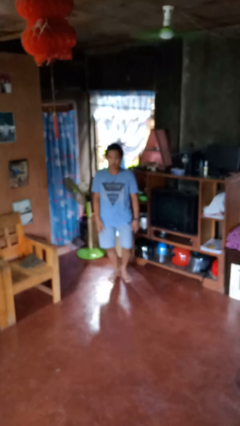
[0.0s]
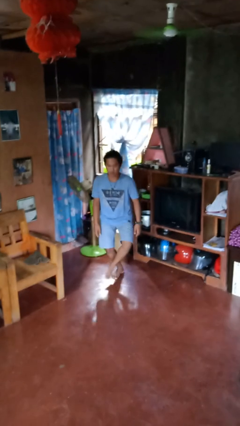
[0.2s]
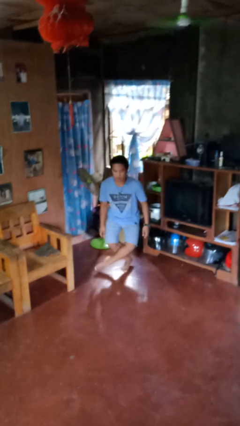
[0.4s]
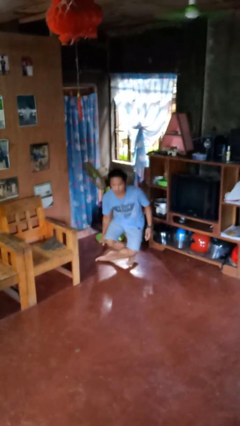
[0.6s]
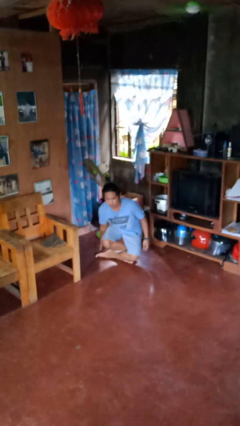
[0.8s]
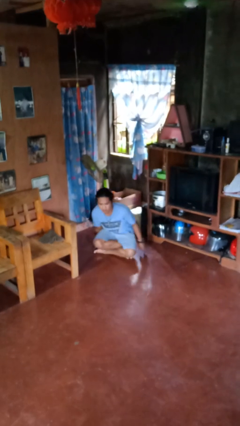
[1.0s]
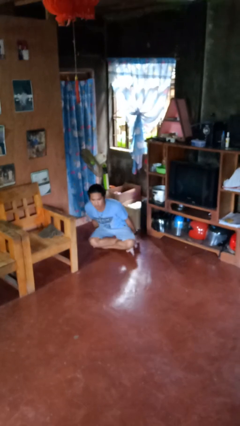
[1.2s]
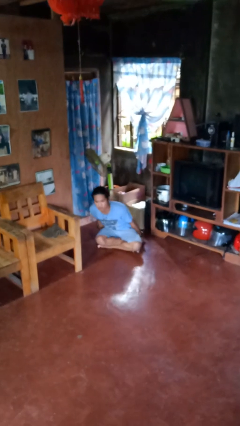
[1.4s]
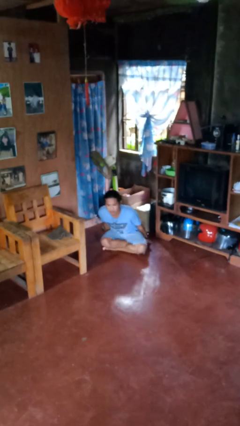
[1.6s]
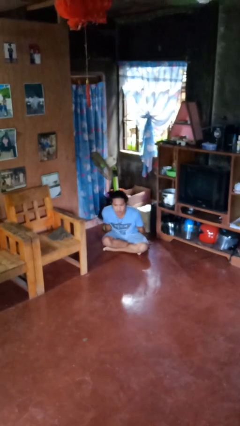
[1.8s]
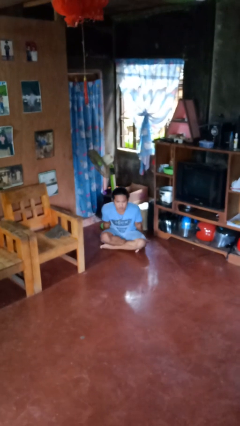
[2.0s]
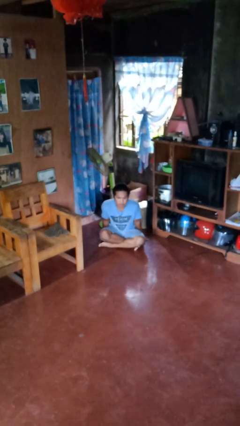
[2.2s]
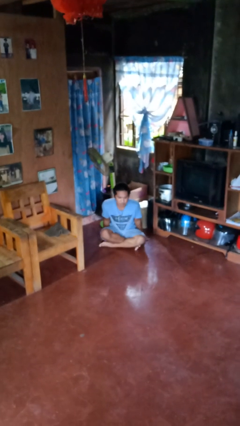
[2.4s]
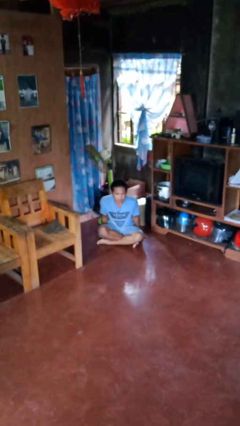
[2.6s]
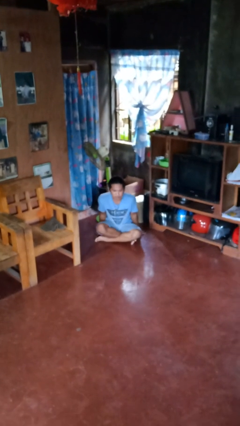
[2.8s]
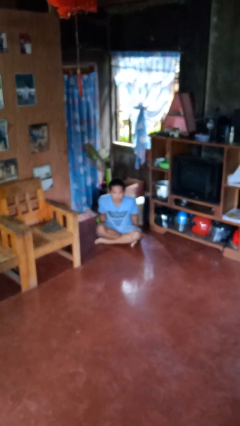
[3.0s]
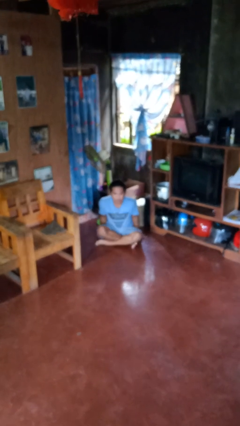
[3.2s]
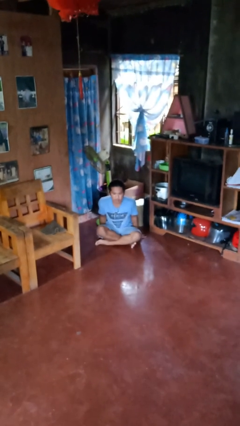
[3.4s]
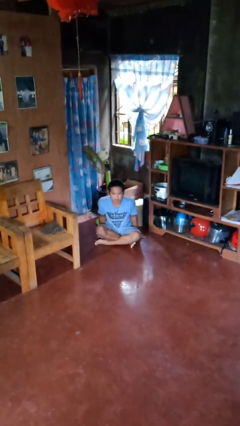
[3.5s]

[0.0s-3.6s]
person sits crisscross

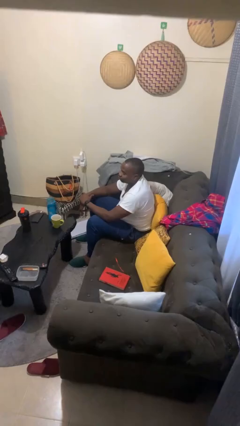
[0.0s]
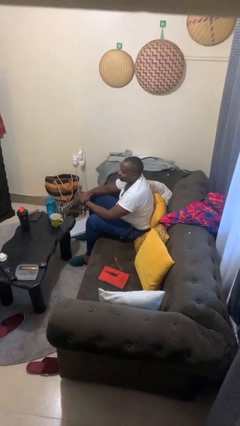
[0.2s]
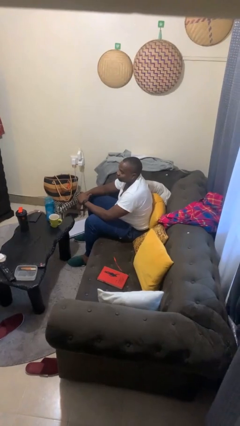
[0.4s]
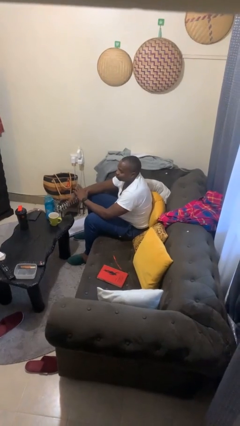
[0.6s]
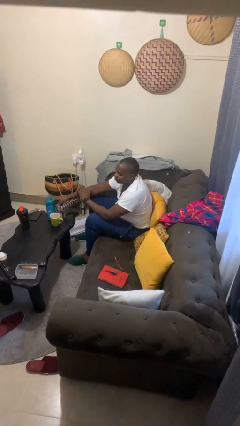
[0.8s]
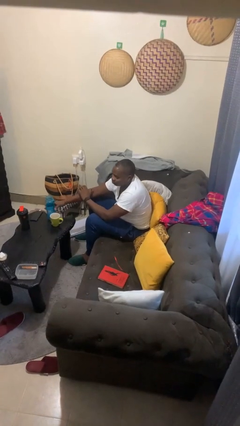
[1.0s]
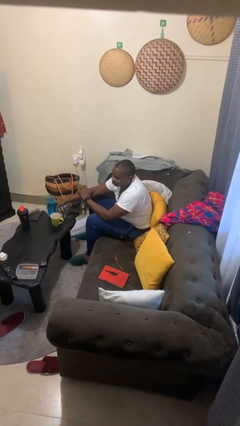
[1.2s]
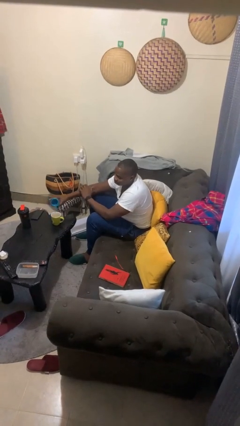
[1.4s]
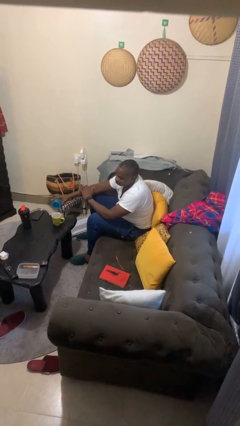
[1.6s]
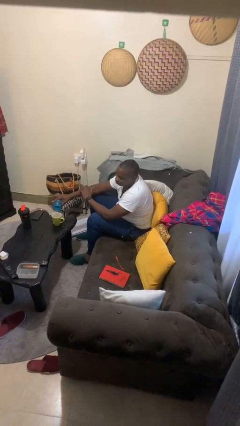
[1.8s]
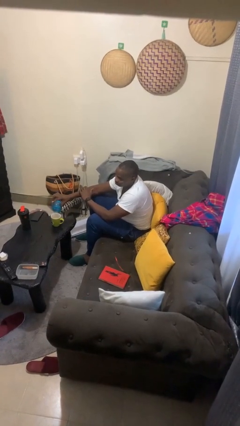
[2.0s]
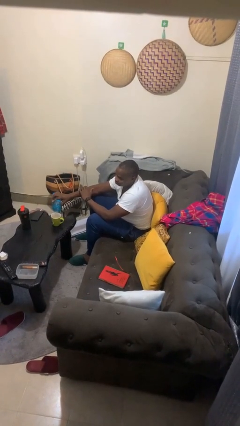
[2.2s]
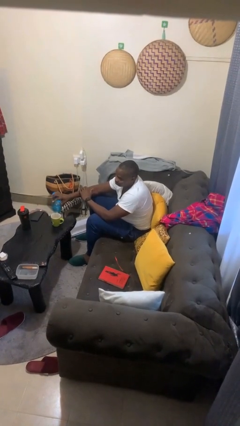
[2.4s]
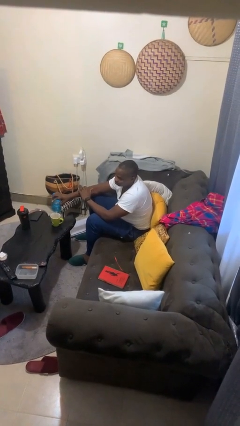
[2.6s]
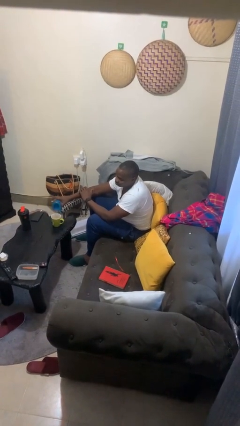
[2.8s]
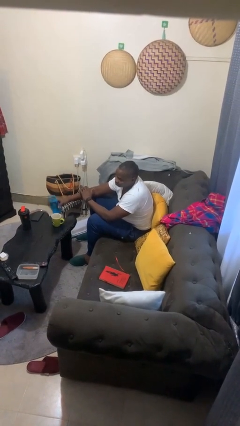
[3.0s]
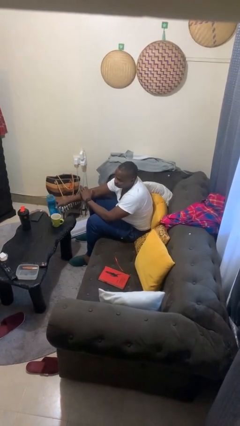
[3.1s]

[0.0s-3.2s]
person pours liquid into cup

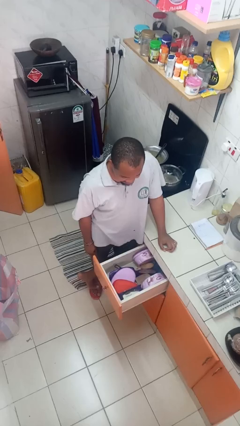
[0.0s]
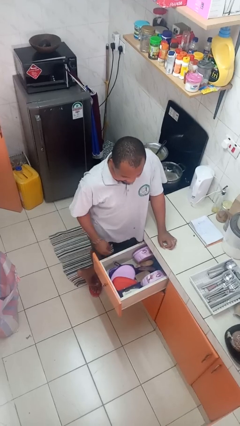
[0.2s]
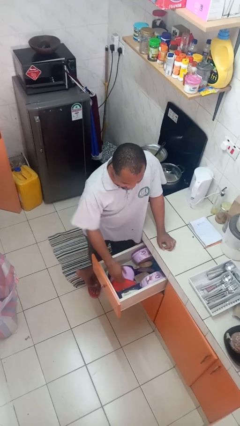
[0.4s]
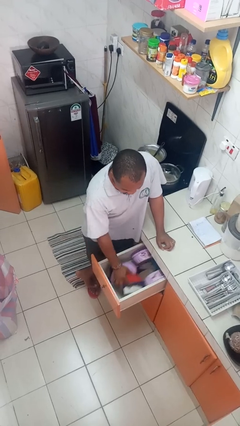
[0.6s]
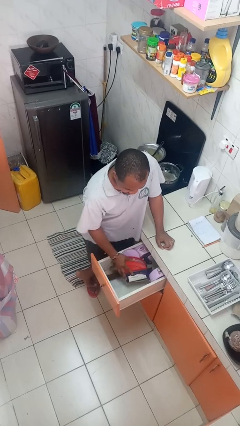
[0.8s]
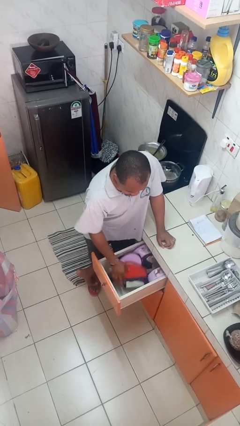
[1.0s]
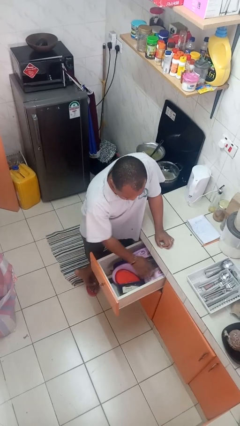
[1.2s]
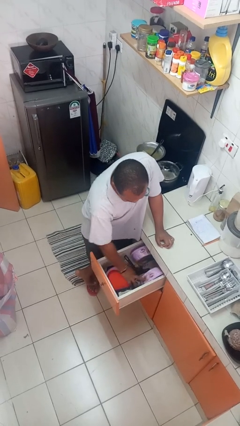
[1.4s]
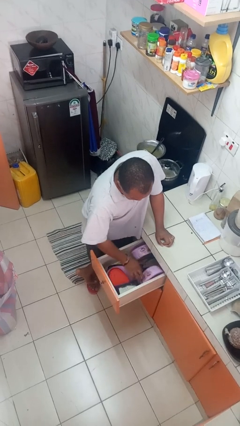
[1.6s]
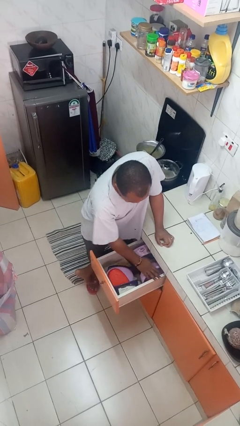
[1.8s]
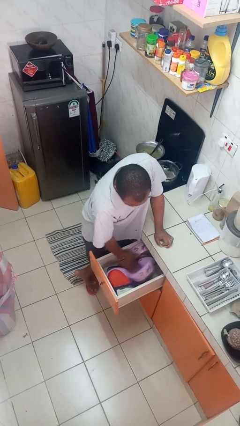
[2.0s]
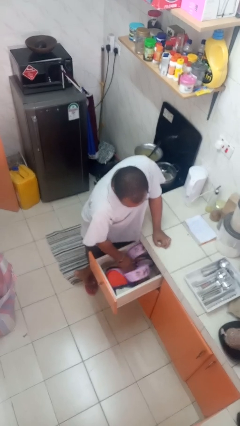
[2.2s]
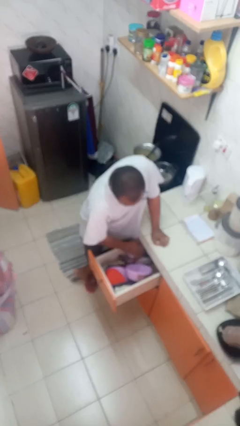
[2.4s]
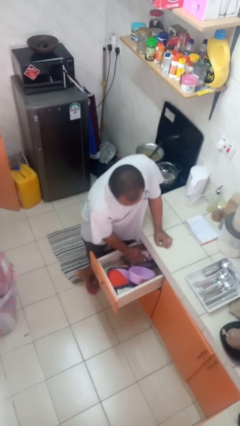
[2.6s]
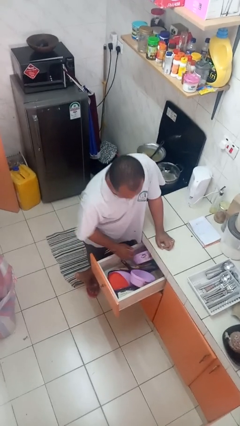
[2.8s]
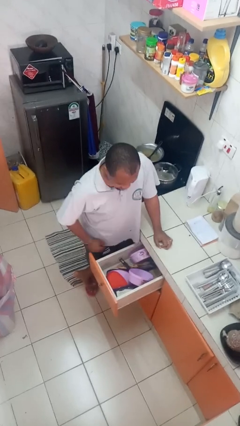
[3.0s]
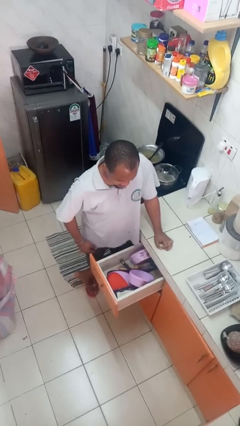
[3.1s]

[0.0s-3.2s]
person searches in kitchen drawer

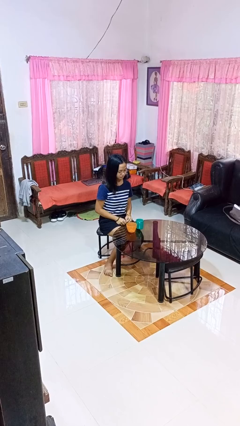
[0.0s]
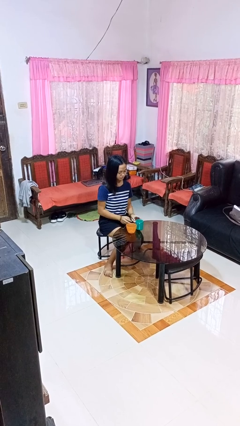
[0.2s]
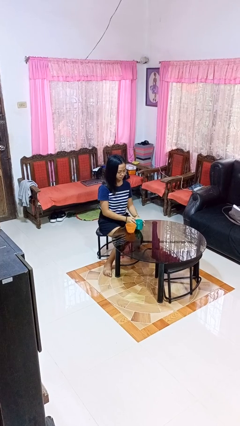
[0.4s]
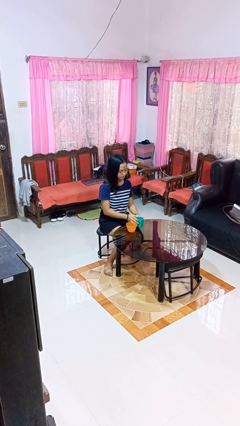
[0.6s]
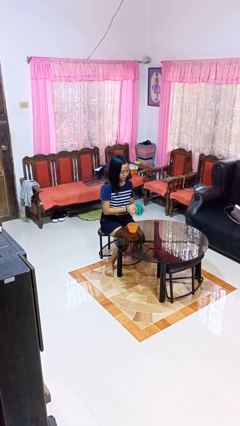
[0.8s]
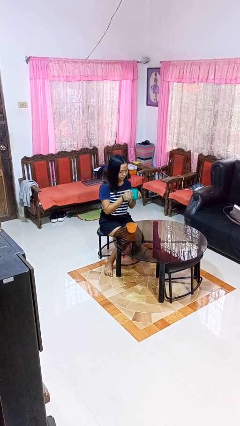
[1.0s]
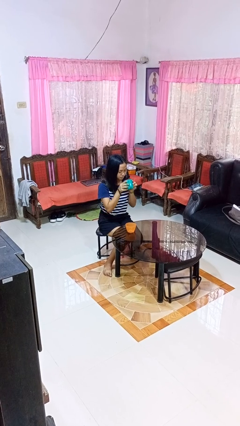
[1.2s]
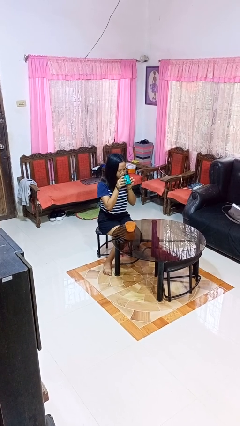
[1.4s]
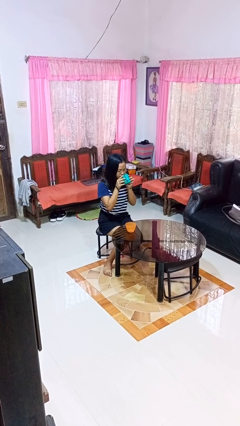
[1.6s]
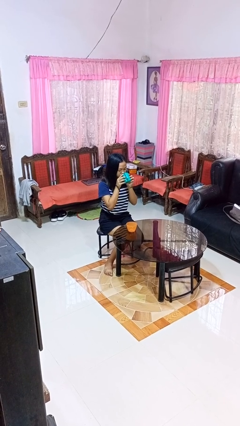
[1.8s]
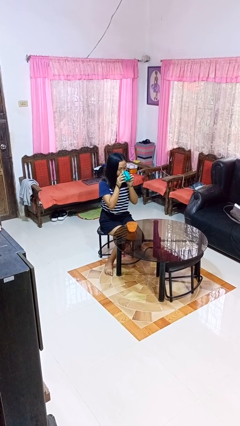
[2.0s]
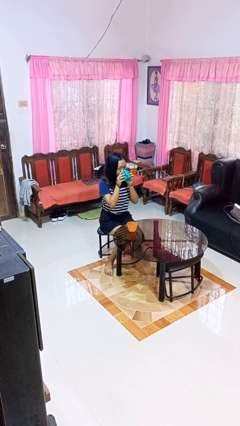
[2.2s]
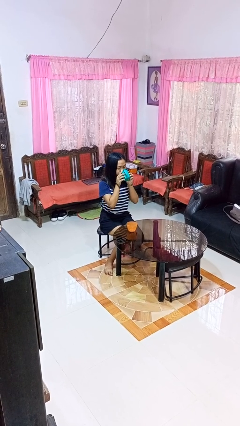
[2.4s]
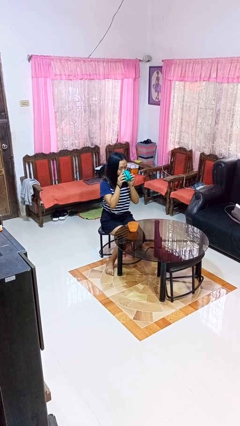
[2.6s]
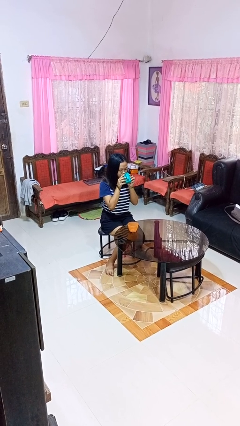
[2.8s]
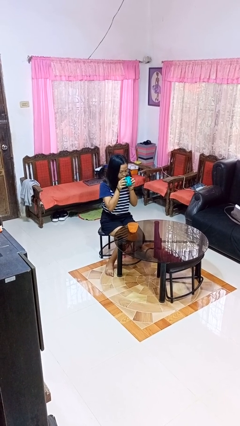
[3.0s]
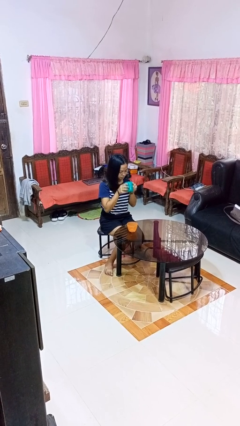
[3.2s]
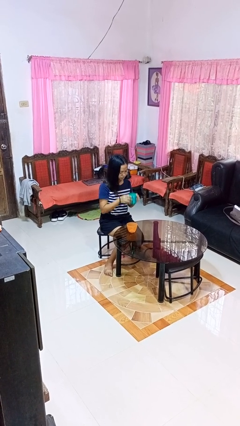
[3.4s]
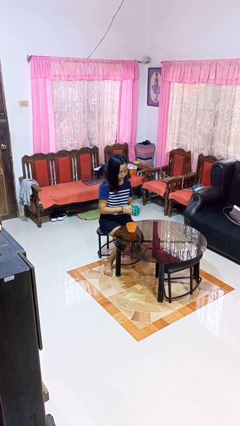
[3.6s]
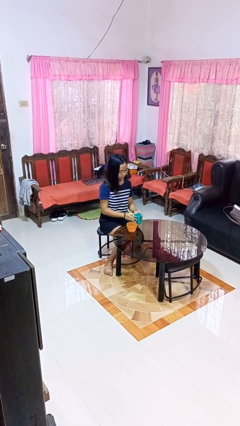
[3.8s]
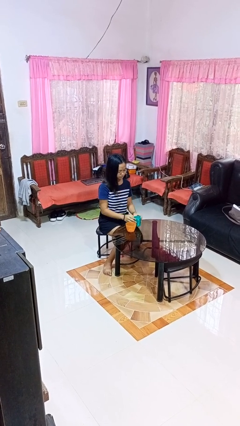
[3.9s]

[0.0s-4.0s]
person drinks from cup

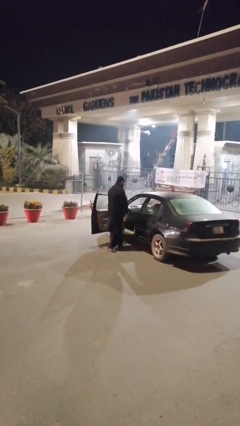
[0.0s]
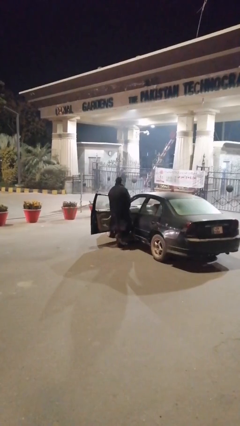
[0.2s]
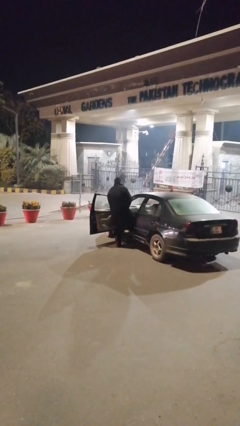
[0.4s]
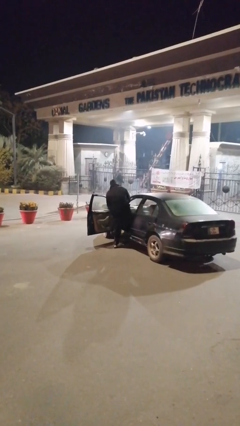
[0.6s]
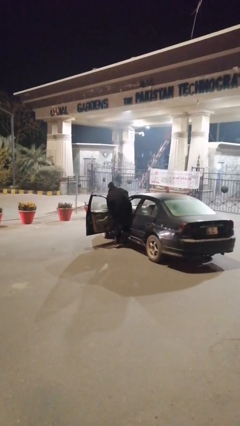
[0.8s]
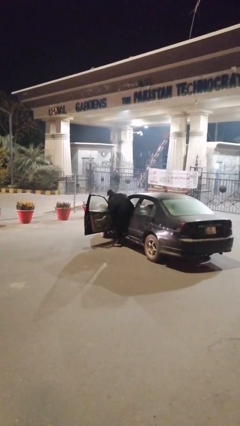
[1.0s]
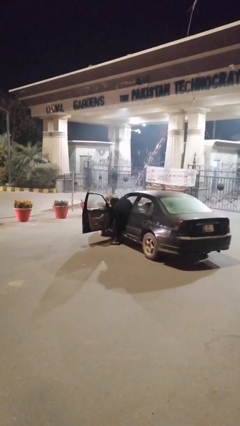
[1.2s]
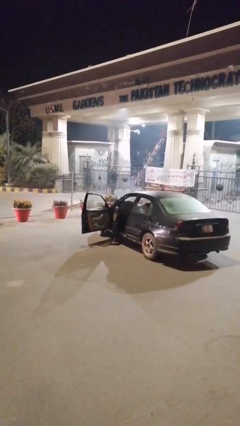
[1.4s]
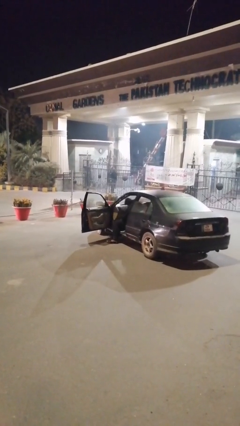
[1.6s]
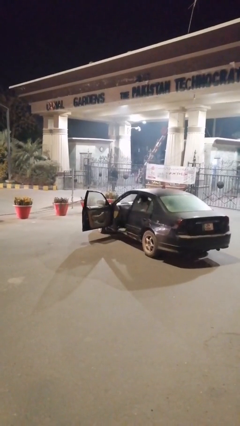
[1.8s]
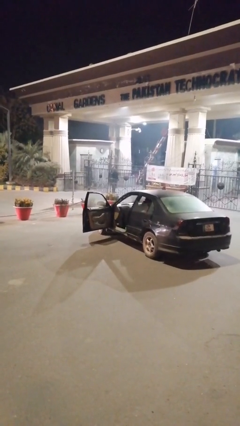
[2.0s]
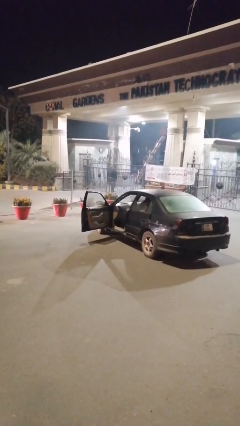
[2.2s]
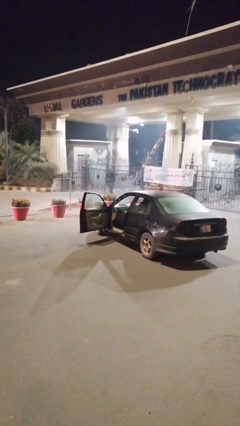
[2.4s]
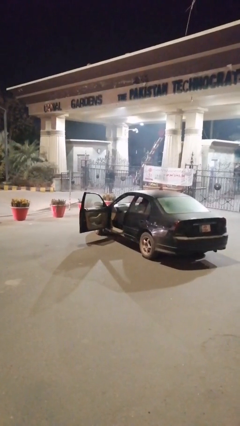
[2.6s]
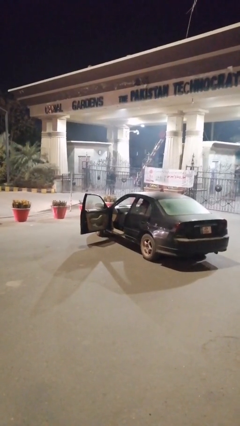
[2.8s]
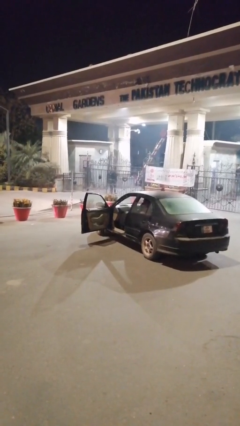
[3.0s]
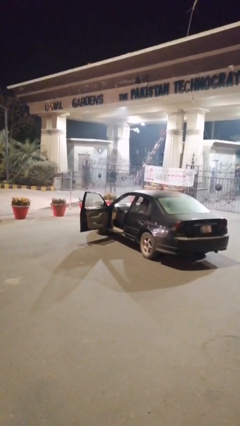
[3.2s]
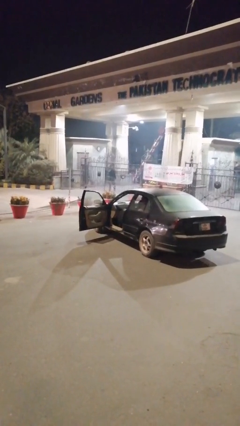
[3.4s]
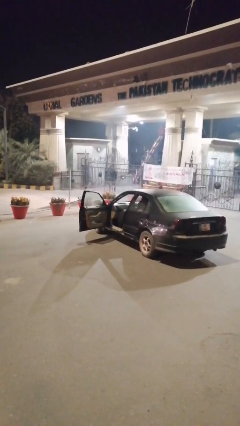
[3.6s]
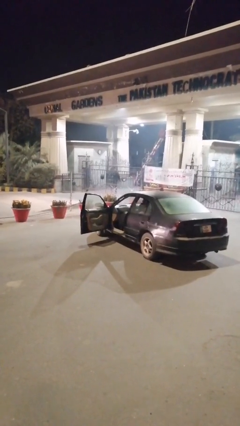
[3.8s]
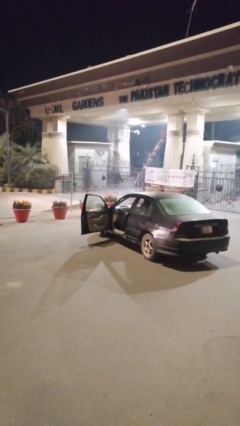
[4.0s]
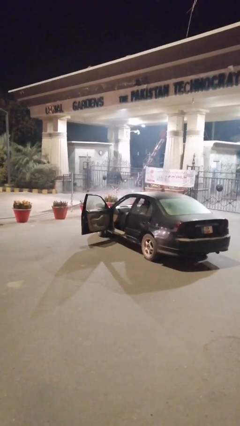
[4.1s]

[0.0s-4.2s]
person enters car
